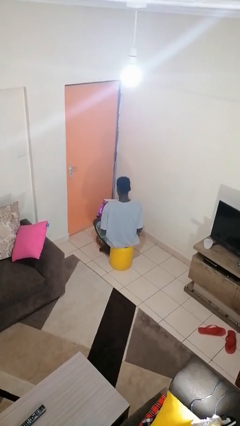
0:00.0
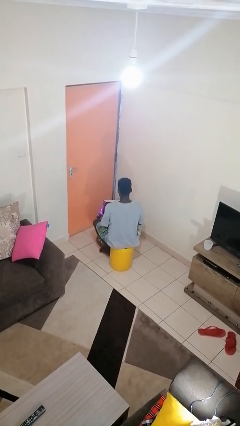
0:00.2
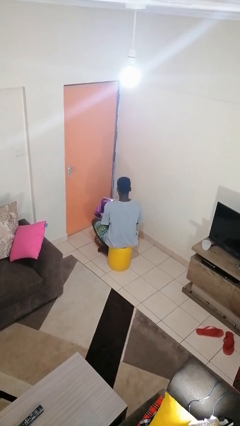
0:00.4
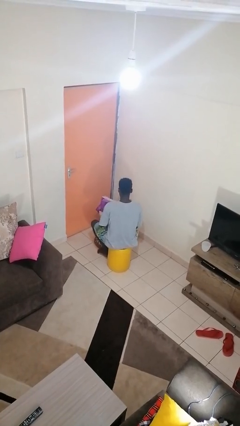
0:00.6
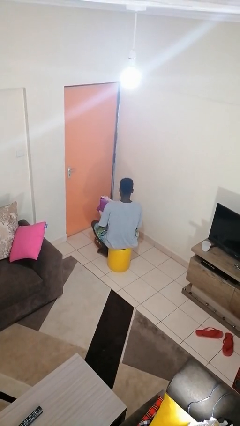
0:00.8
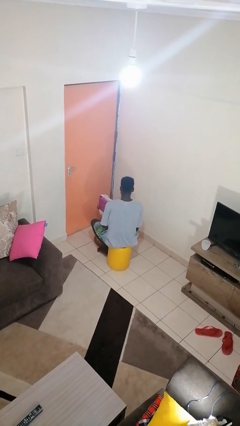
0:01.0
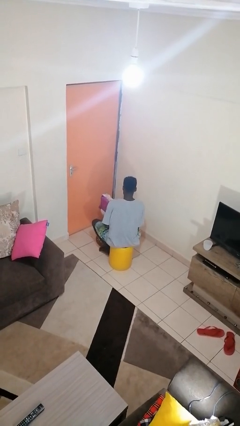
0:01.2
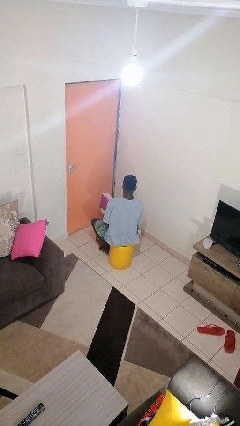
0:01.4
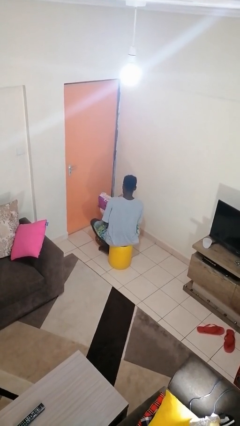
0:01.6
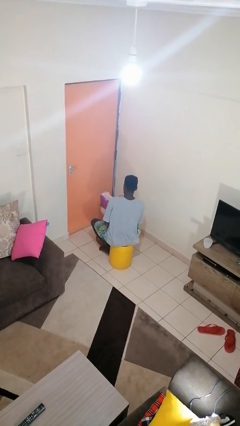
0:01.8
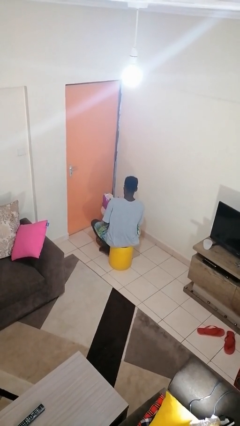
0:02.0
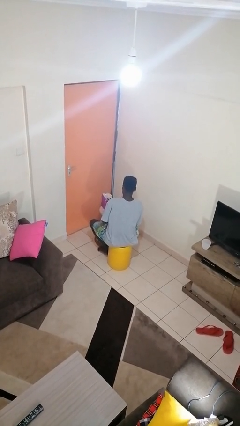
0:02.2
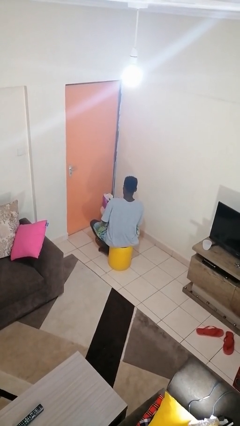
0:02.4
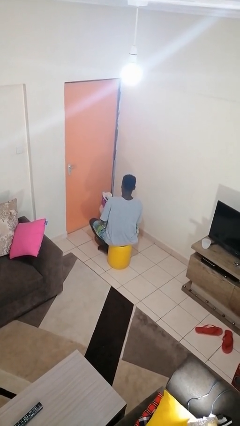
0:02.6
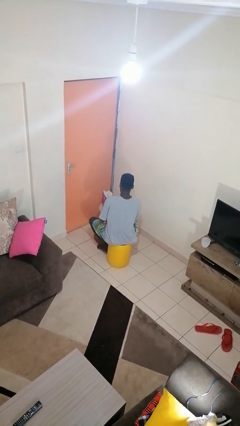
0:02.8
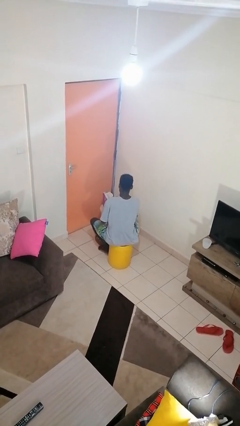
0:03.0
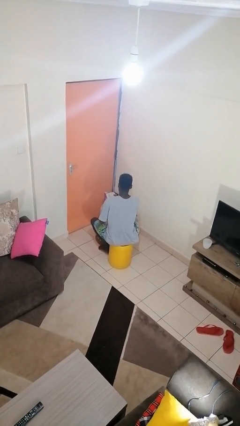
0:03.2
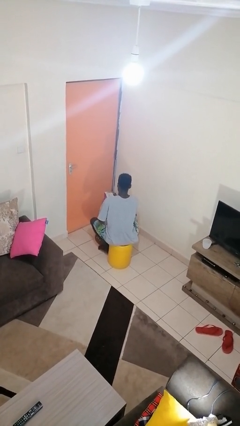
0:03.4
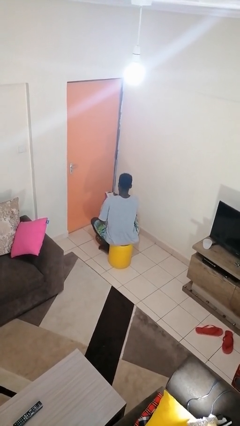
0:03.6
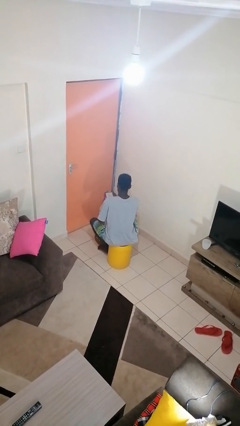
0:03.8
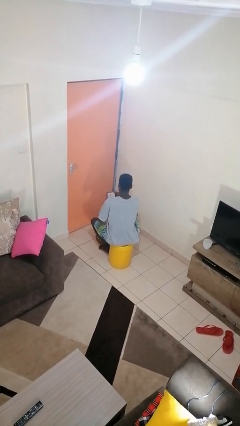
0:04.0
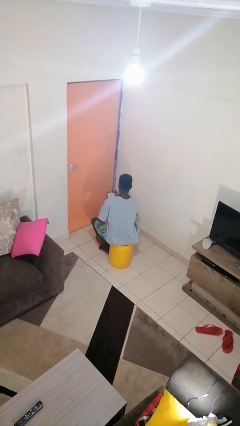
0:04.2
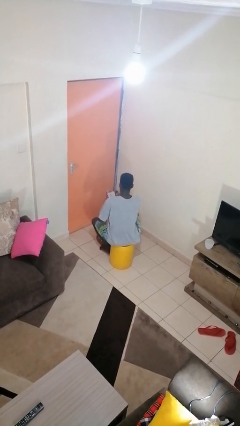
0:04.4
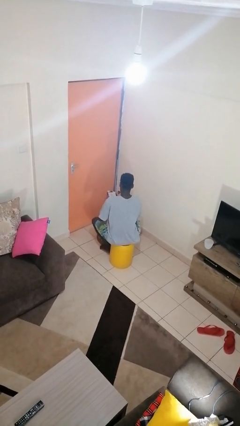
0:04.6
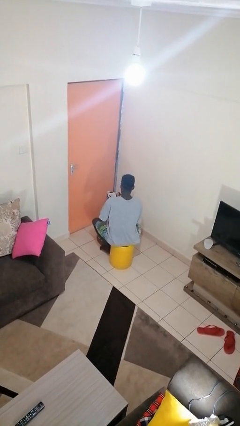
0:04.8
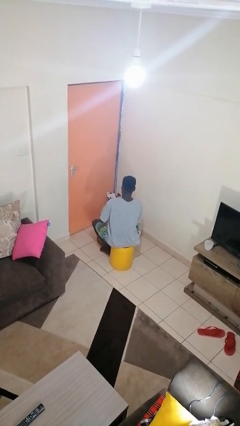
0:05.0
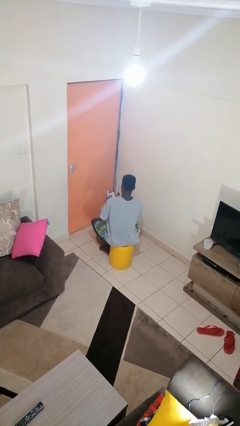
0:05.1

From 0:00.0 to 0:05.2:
person wraps box

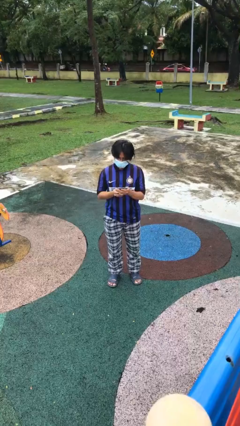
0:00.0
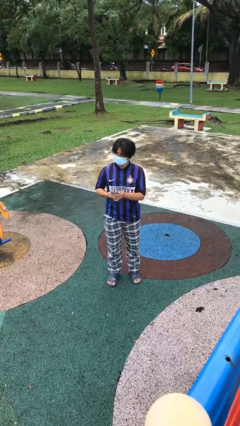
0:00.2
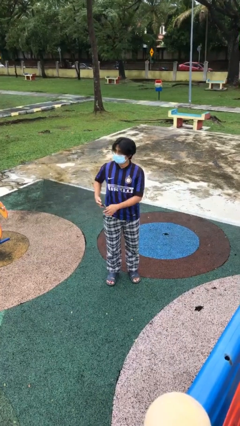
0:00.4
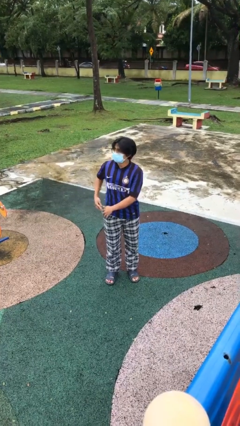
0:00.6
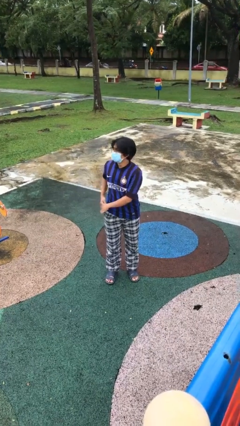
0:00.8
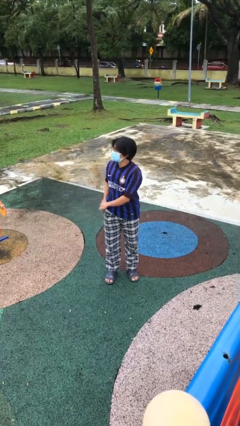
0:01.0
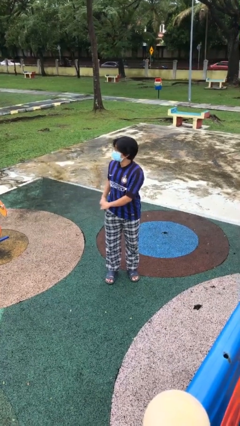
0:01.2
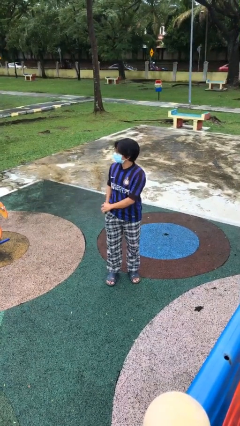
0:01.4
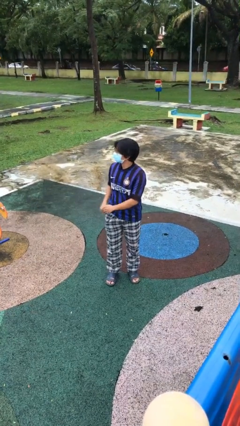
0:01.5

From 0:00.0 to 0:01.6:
person puts phone into pocket

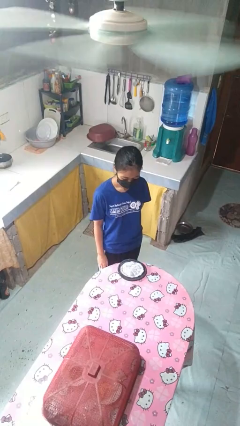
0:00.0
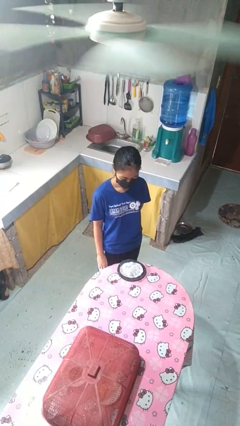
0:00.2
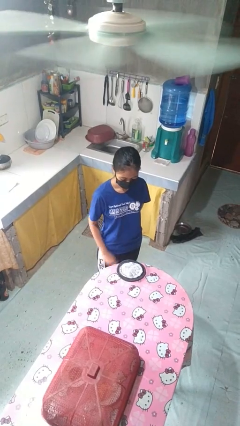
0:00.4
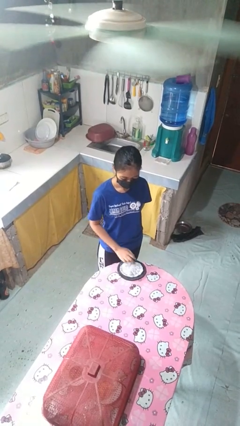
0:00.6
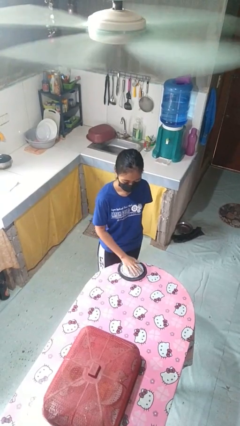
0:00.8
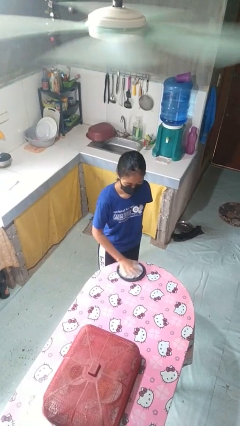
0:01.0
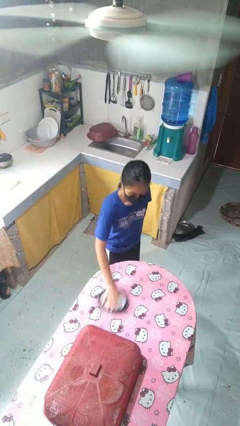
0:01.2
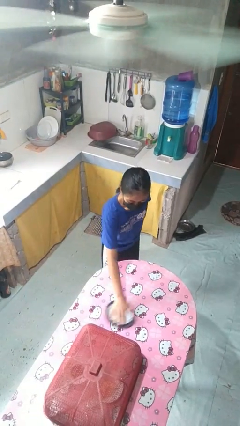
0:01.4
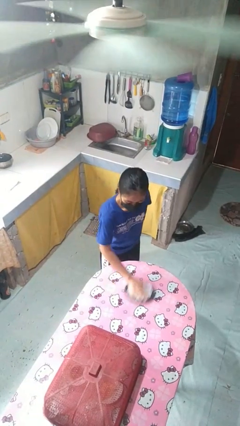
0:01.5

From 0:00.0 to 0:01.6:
person cleans table with rag

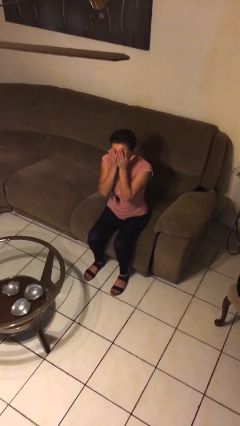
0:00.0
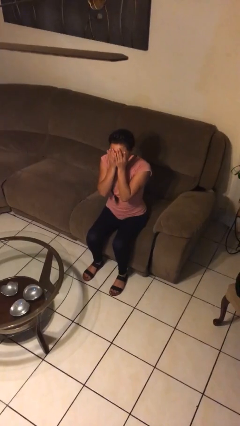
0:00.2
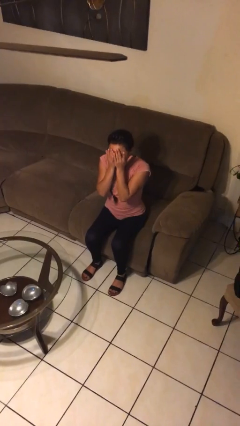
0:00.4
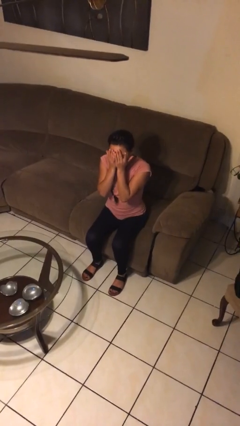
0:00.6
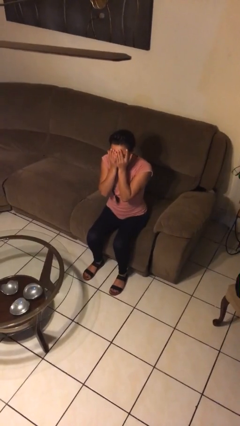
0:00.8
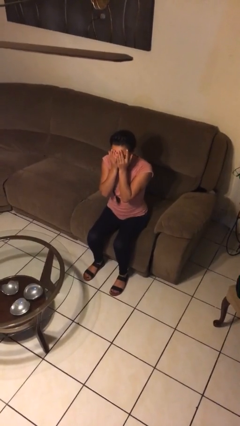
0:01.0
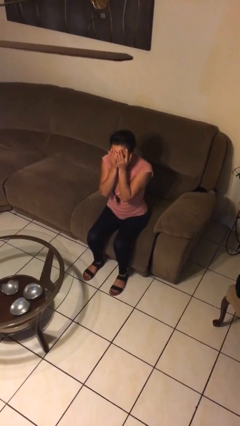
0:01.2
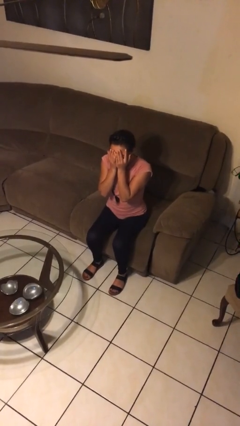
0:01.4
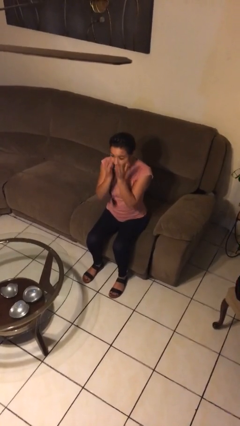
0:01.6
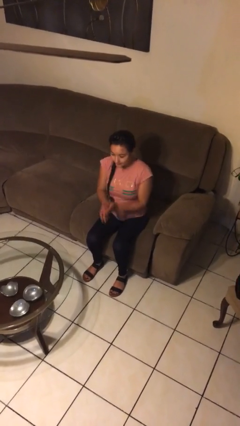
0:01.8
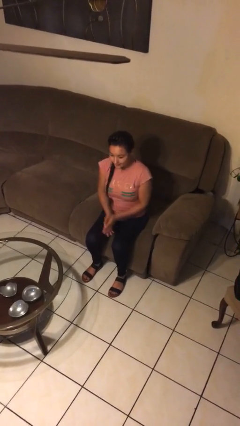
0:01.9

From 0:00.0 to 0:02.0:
person covers face with hands

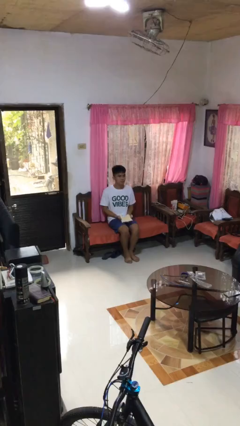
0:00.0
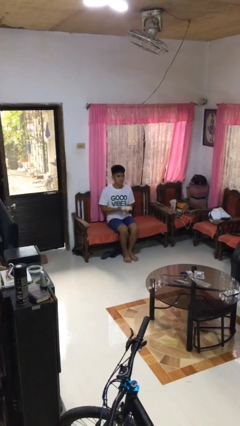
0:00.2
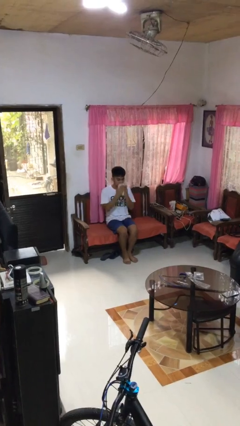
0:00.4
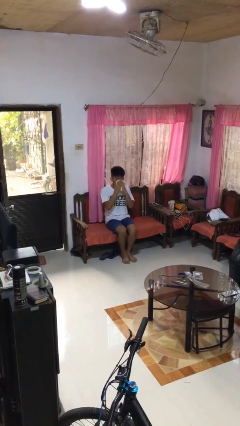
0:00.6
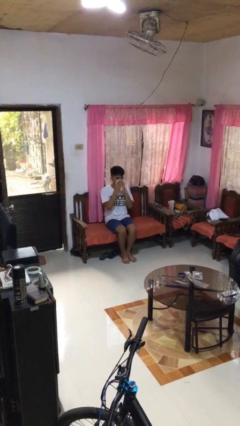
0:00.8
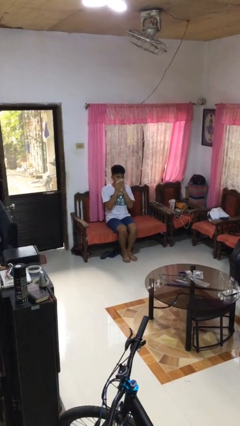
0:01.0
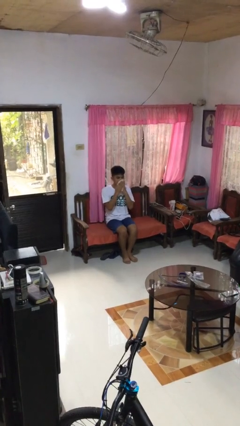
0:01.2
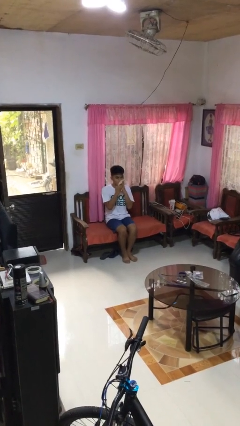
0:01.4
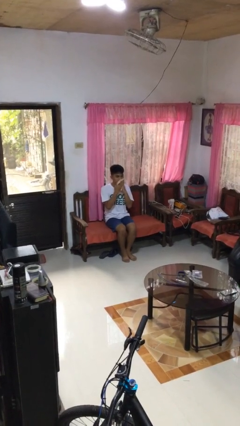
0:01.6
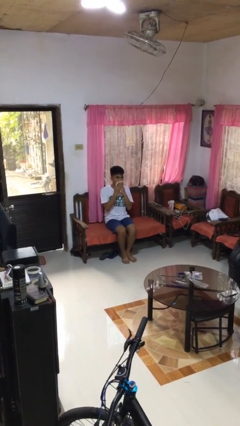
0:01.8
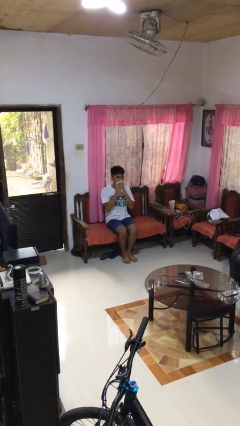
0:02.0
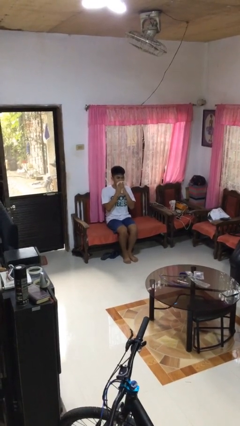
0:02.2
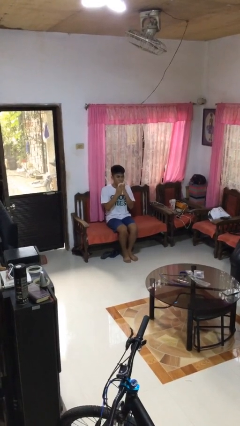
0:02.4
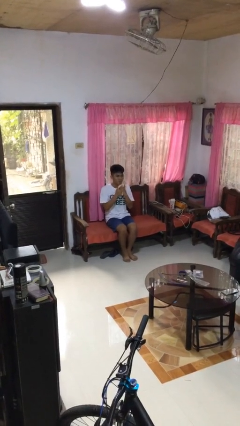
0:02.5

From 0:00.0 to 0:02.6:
person wipes mouth with napkin

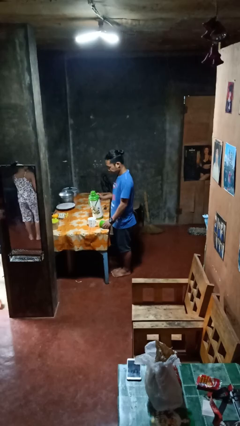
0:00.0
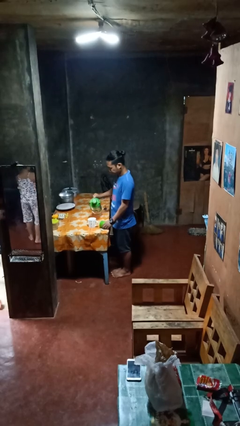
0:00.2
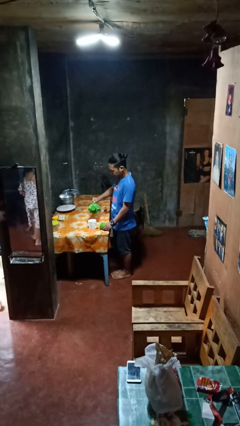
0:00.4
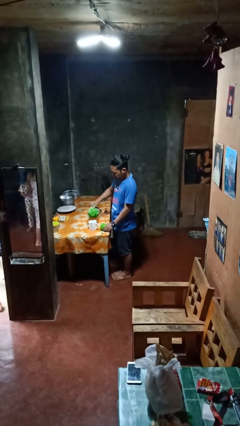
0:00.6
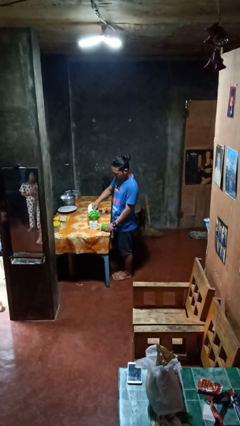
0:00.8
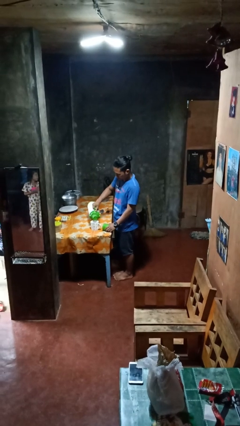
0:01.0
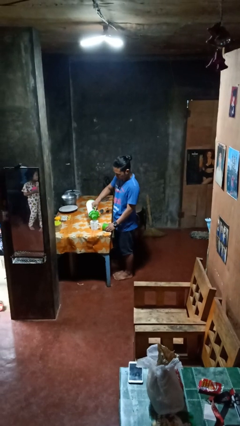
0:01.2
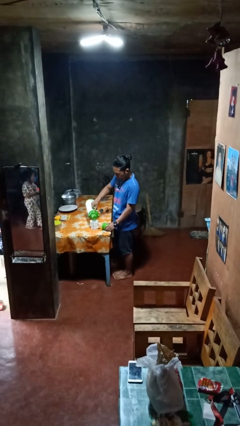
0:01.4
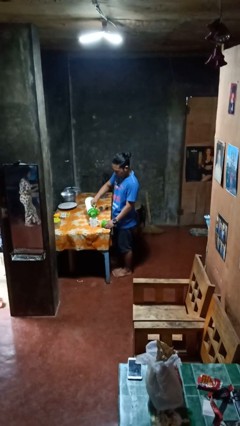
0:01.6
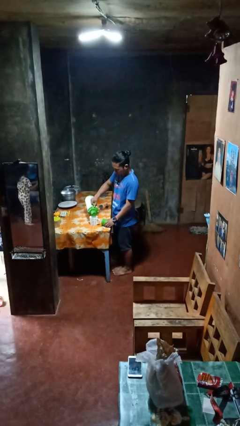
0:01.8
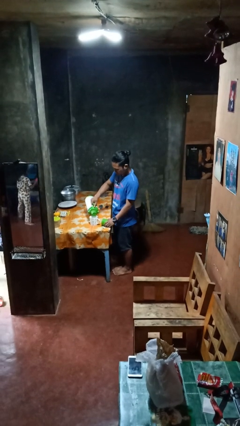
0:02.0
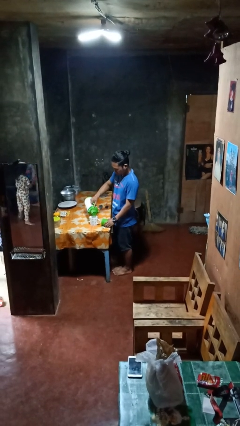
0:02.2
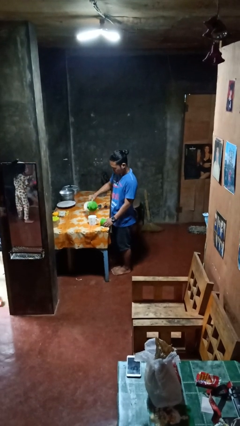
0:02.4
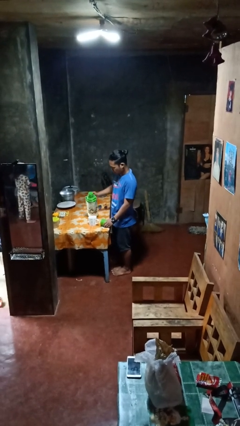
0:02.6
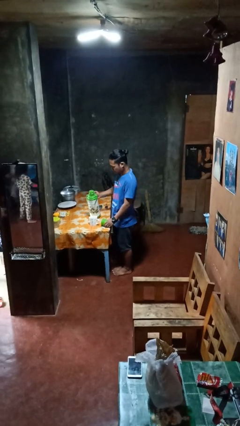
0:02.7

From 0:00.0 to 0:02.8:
person pours coffee into mug

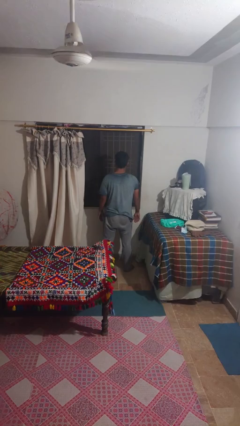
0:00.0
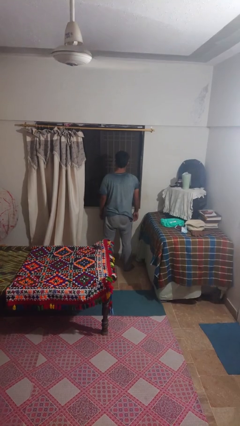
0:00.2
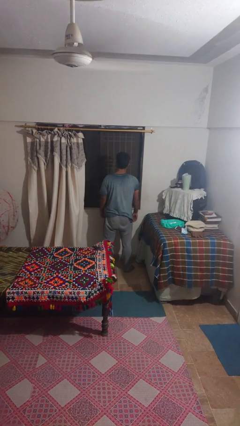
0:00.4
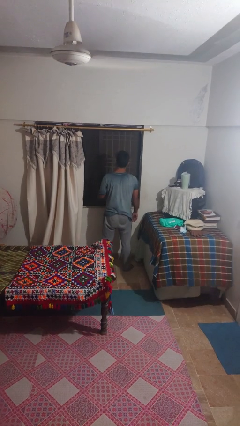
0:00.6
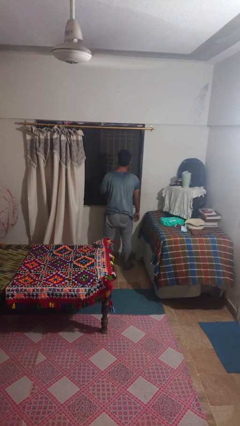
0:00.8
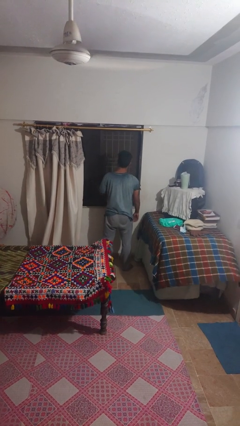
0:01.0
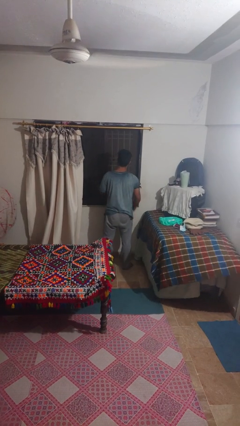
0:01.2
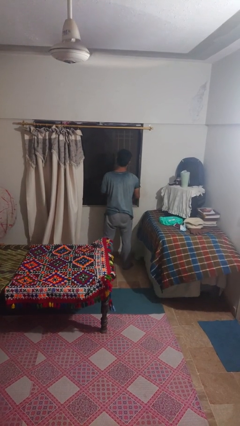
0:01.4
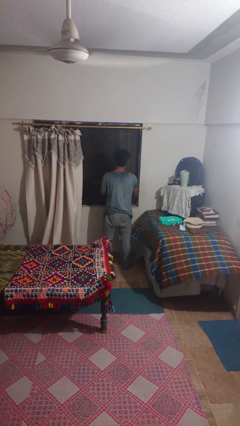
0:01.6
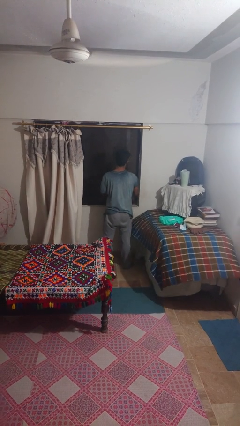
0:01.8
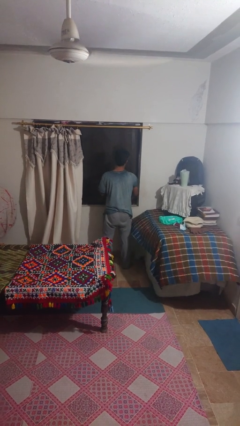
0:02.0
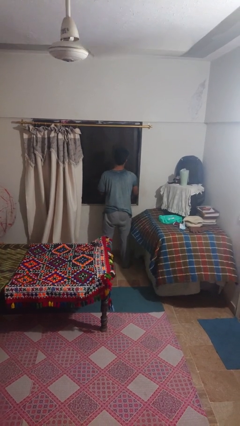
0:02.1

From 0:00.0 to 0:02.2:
person closes sliding door
